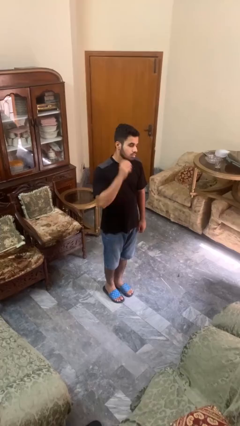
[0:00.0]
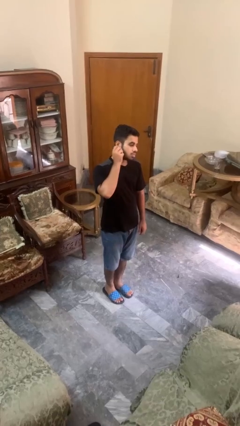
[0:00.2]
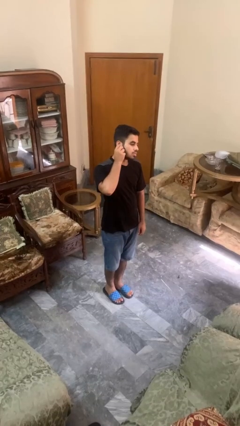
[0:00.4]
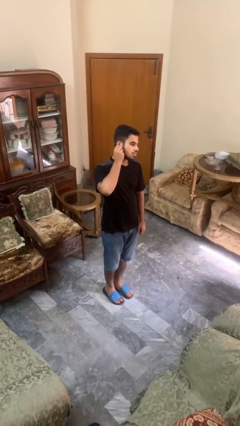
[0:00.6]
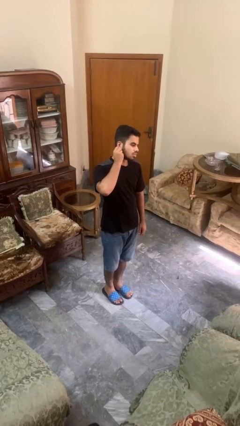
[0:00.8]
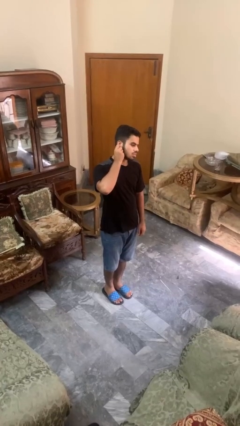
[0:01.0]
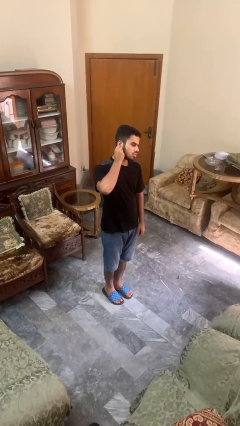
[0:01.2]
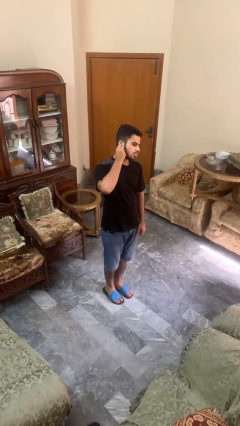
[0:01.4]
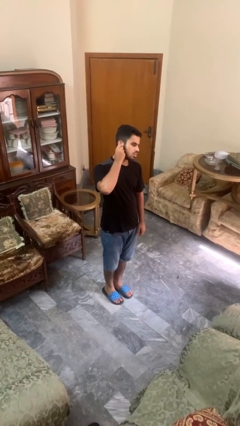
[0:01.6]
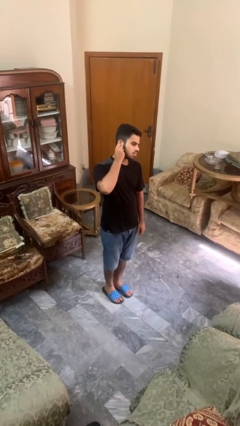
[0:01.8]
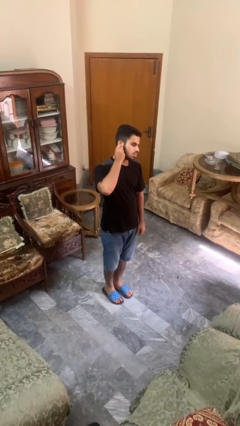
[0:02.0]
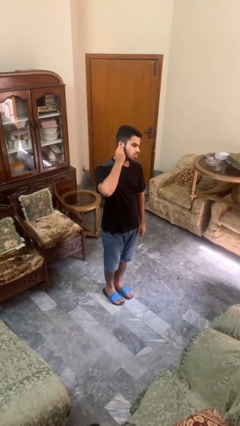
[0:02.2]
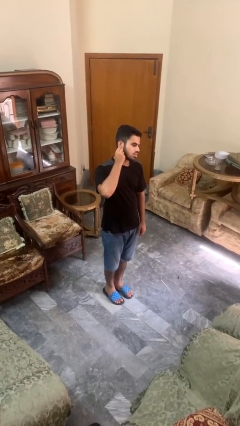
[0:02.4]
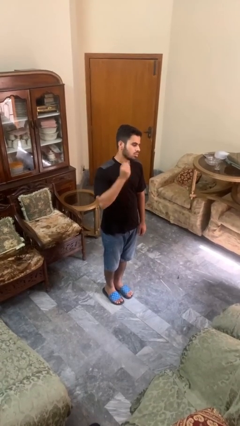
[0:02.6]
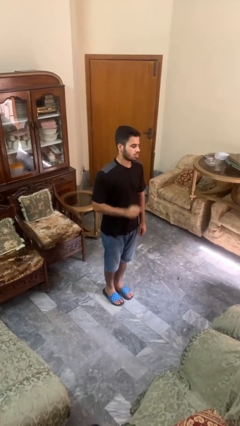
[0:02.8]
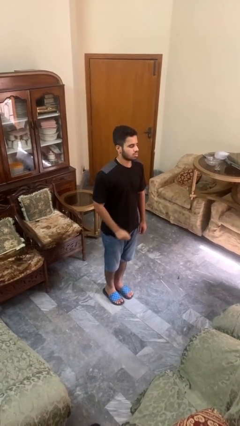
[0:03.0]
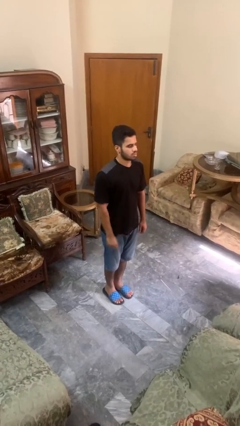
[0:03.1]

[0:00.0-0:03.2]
person touches earlobe

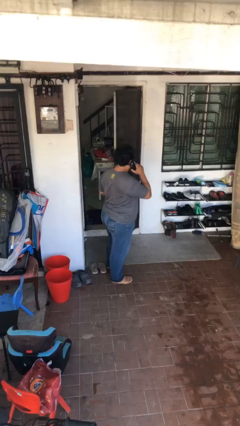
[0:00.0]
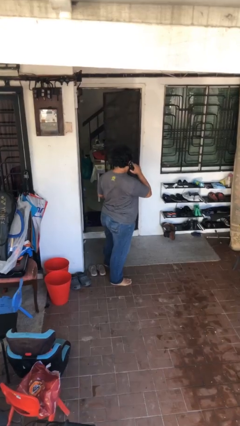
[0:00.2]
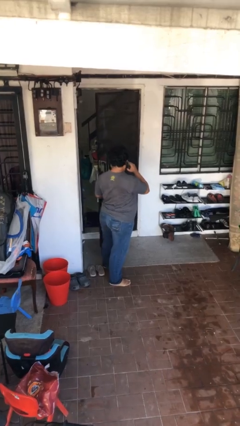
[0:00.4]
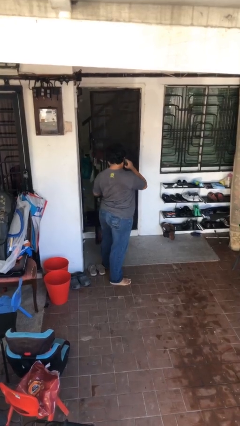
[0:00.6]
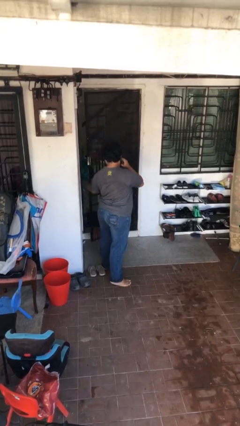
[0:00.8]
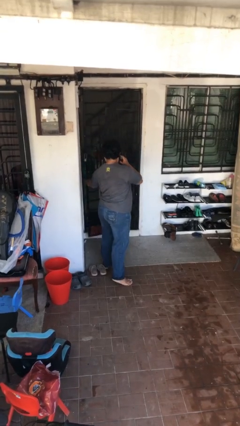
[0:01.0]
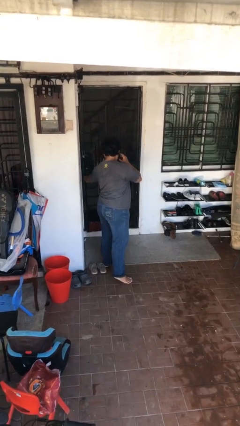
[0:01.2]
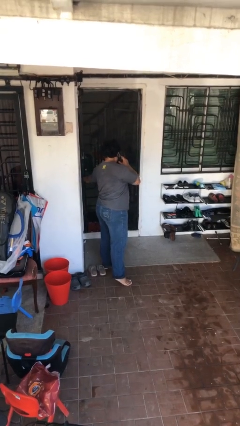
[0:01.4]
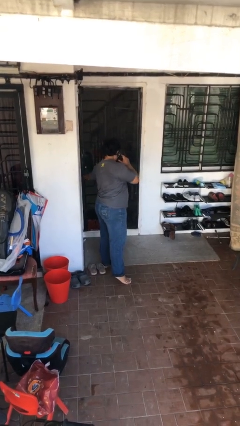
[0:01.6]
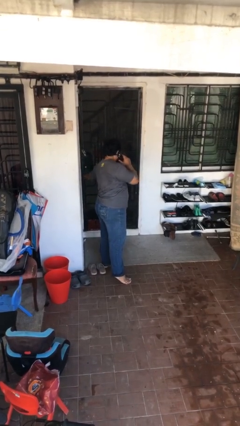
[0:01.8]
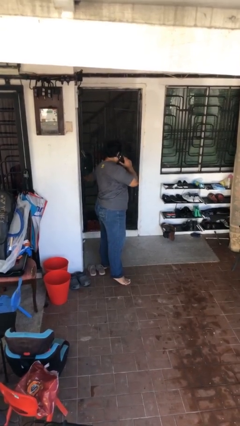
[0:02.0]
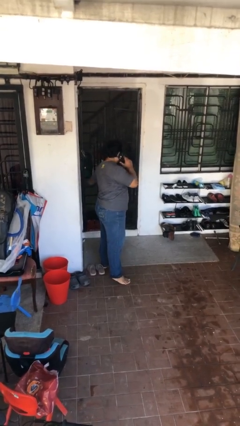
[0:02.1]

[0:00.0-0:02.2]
person closes facility door

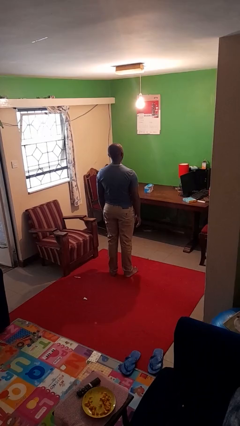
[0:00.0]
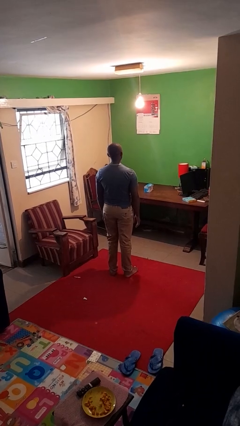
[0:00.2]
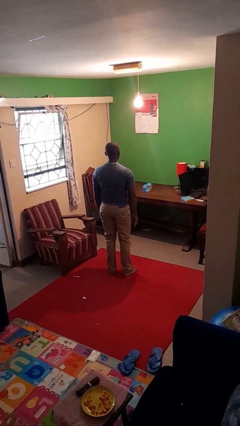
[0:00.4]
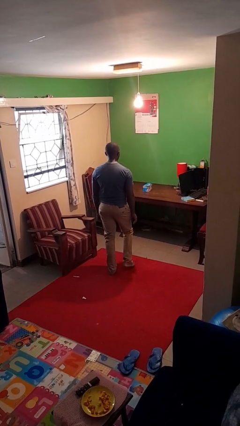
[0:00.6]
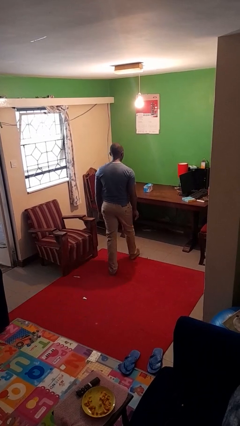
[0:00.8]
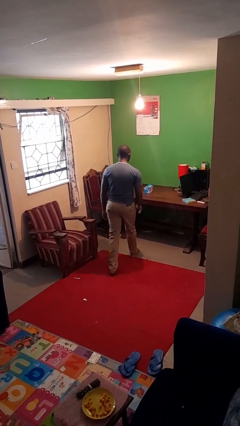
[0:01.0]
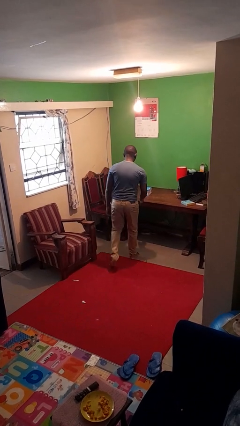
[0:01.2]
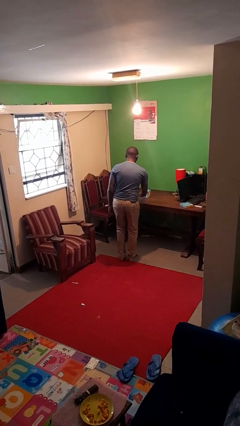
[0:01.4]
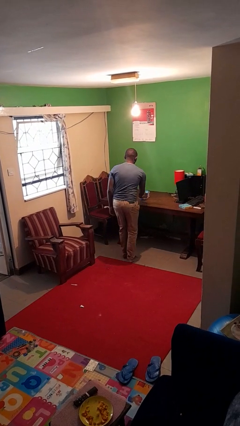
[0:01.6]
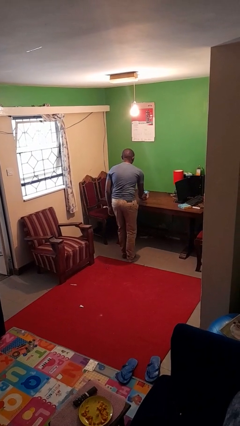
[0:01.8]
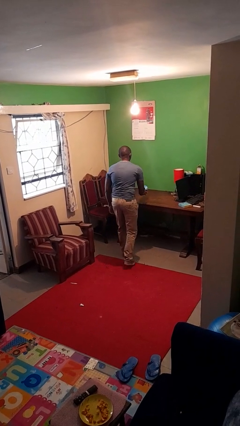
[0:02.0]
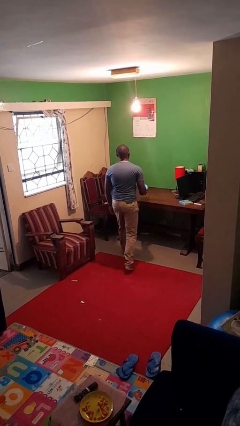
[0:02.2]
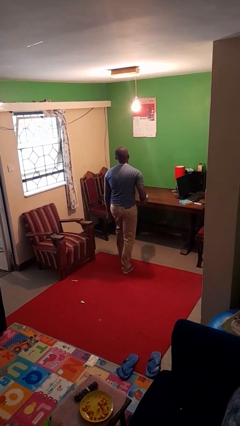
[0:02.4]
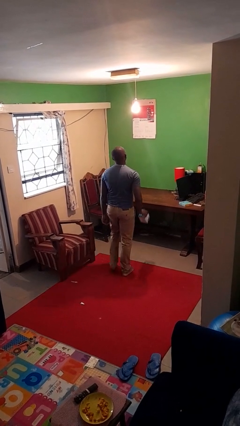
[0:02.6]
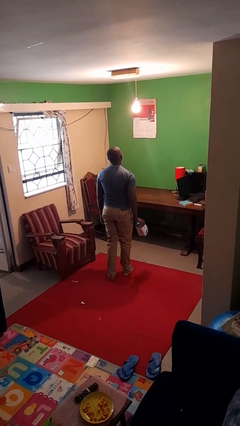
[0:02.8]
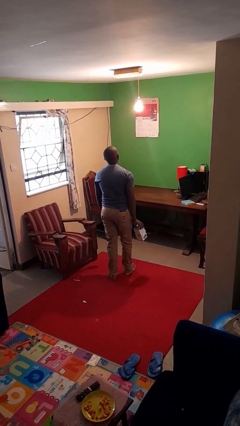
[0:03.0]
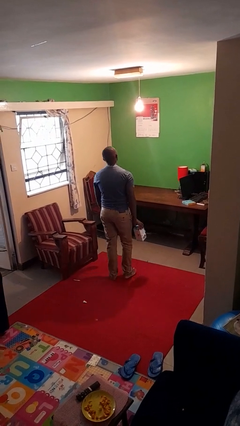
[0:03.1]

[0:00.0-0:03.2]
person picks up object from table

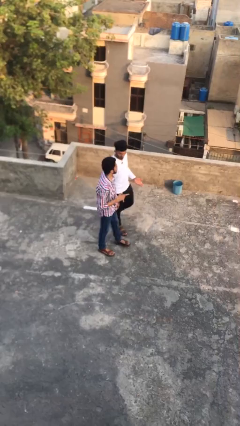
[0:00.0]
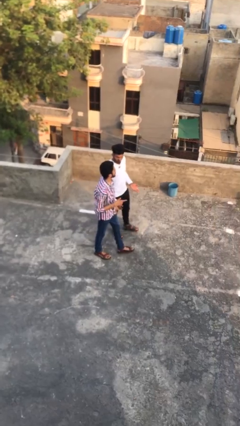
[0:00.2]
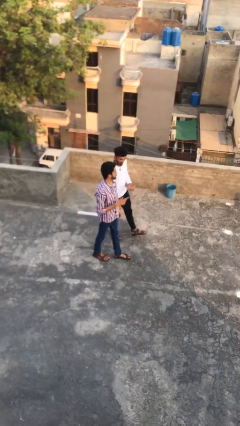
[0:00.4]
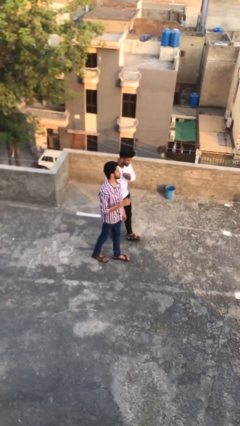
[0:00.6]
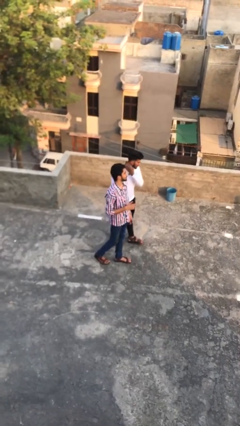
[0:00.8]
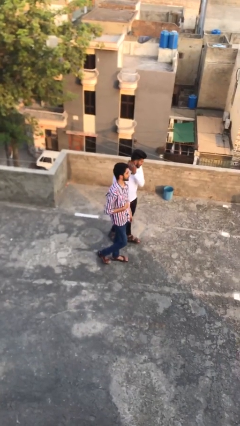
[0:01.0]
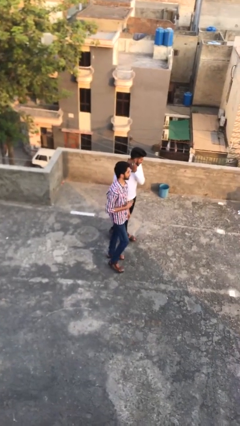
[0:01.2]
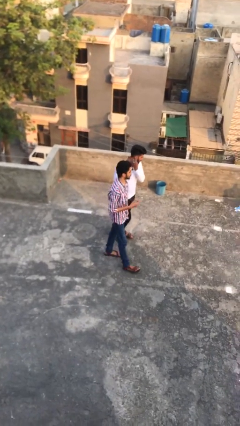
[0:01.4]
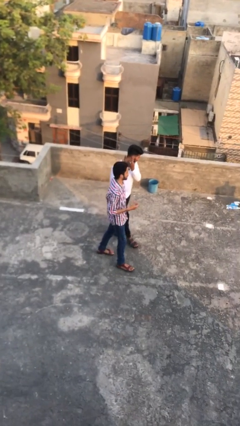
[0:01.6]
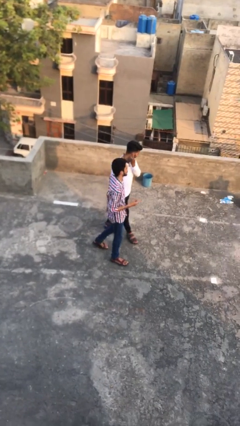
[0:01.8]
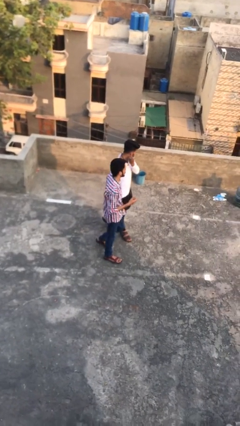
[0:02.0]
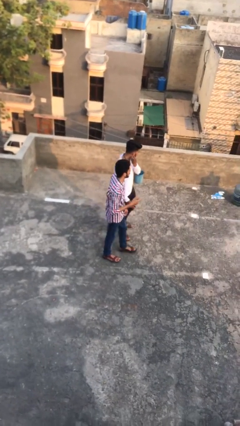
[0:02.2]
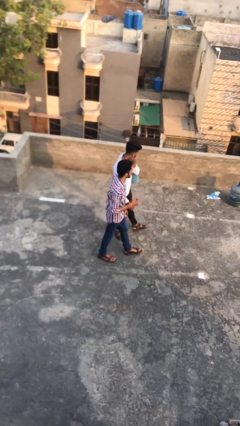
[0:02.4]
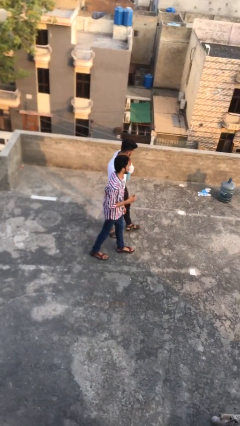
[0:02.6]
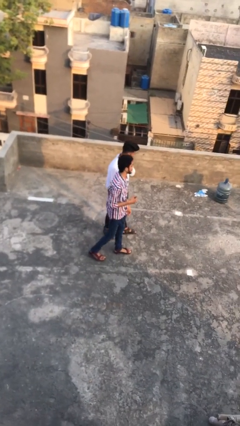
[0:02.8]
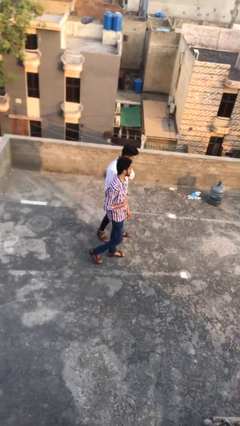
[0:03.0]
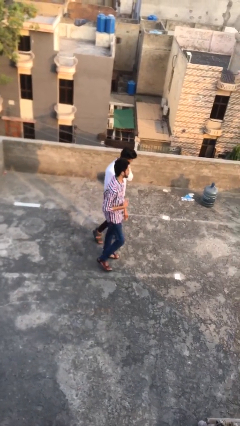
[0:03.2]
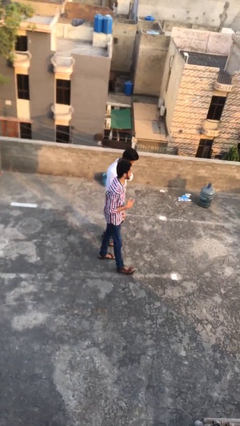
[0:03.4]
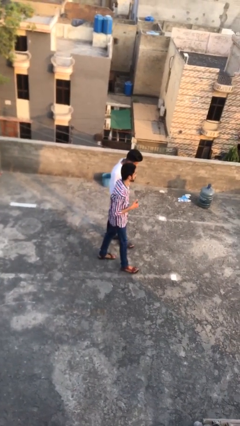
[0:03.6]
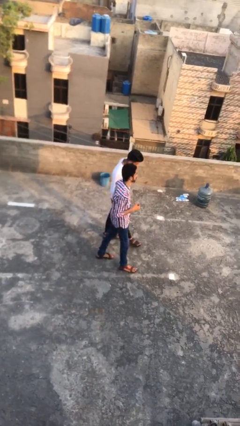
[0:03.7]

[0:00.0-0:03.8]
person talks to person

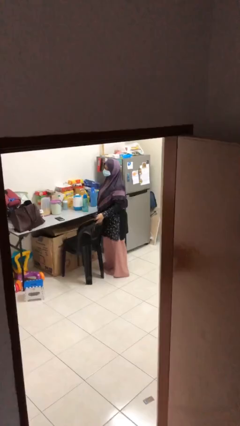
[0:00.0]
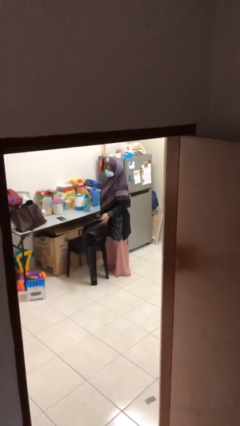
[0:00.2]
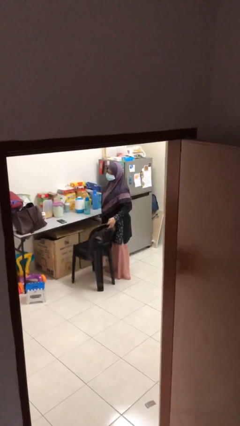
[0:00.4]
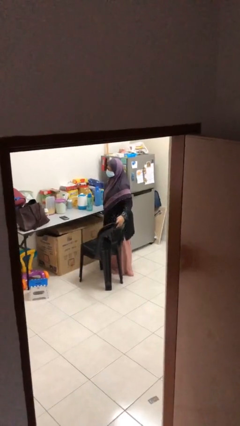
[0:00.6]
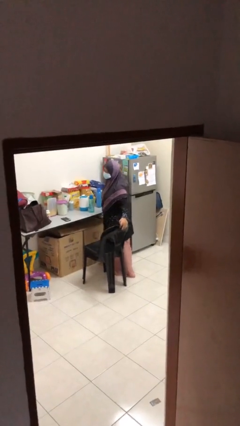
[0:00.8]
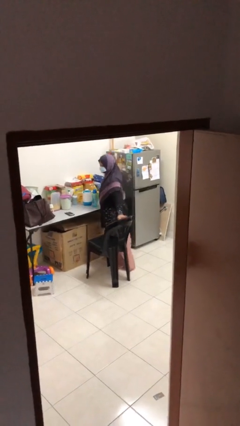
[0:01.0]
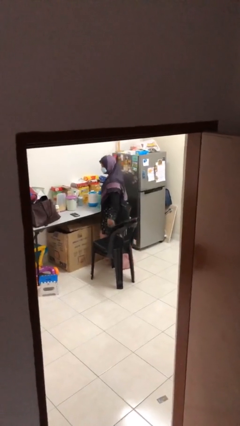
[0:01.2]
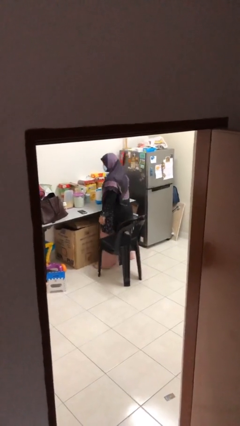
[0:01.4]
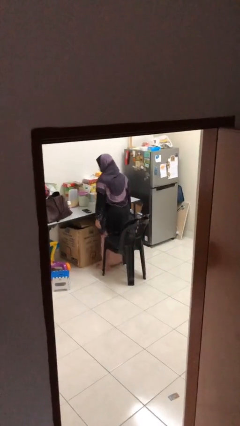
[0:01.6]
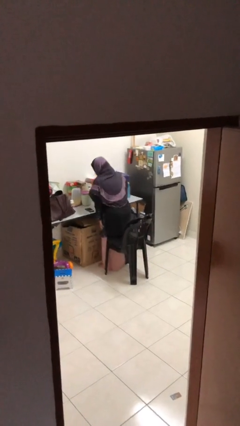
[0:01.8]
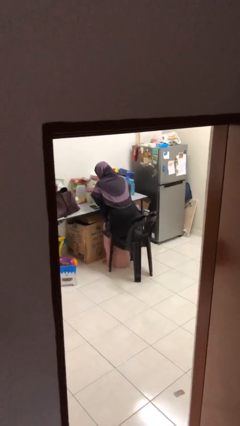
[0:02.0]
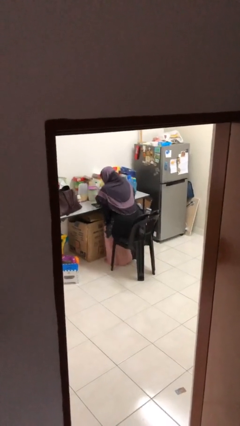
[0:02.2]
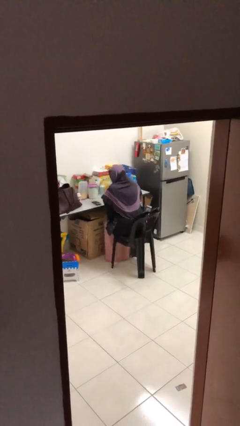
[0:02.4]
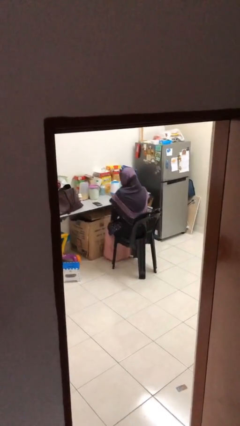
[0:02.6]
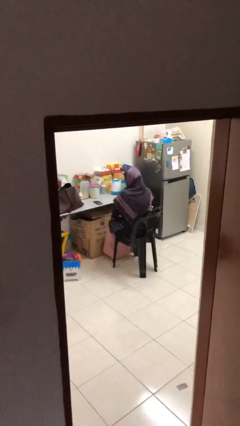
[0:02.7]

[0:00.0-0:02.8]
person sits down

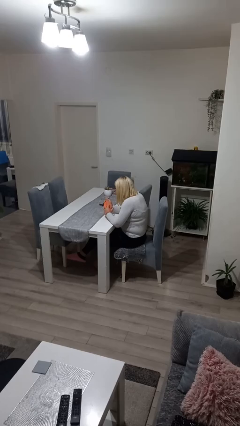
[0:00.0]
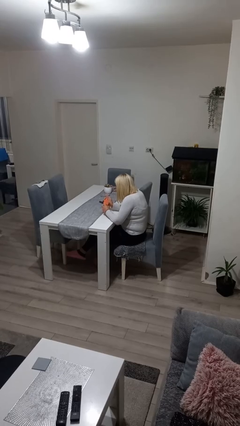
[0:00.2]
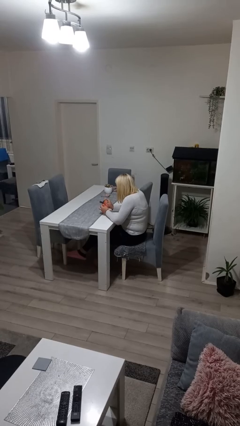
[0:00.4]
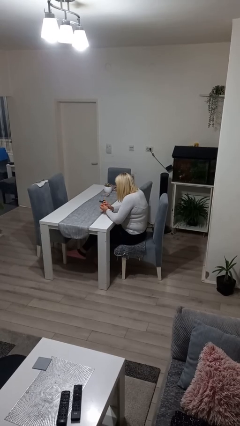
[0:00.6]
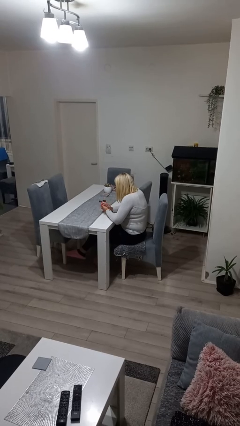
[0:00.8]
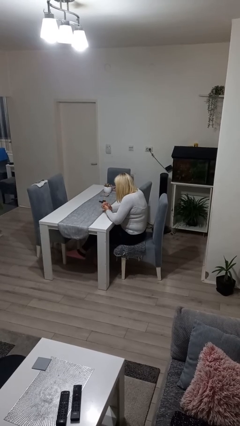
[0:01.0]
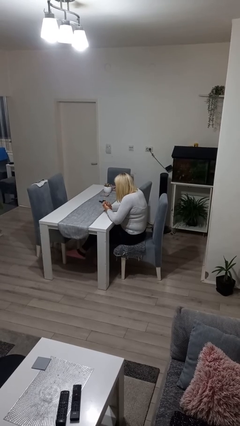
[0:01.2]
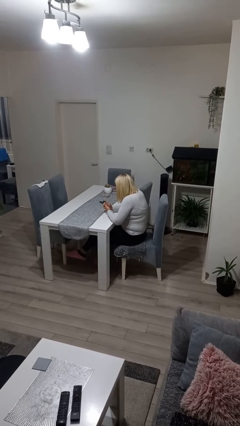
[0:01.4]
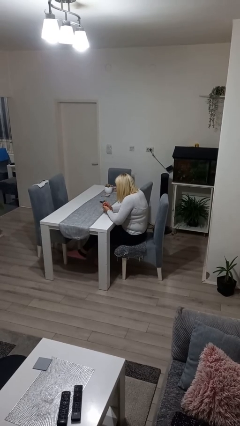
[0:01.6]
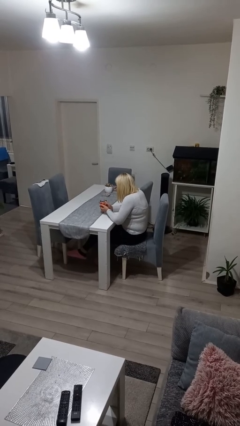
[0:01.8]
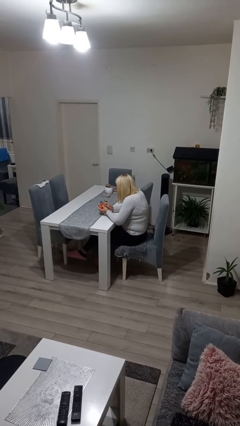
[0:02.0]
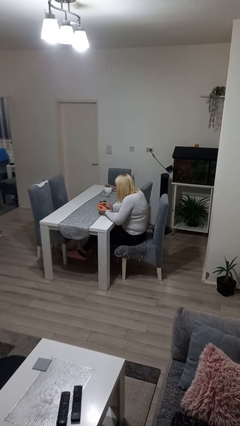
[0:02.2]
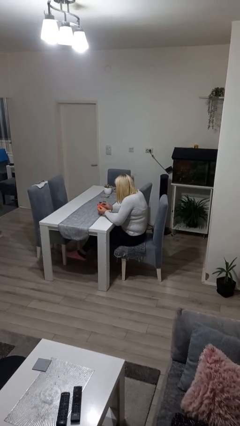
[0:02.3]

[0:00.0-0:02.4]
person crumples paper
